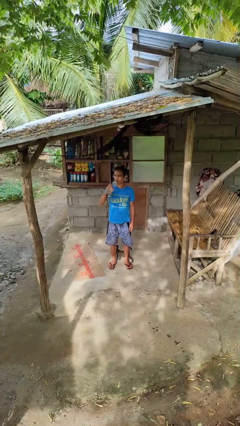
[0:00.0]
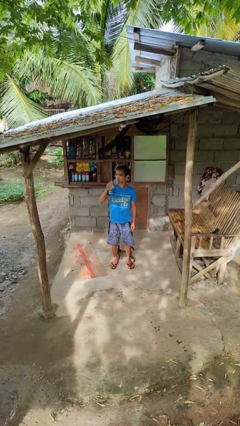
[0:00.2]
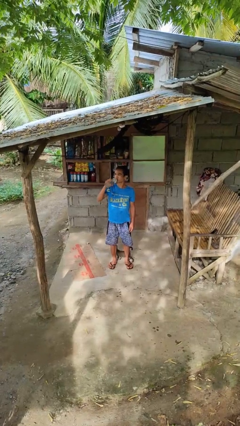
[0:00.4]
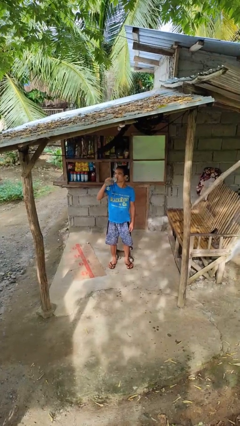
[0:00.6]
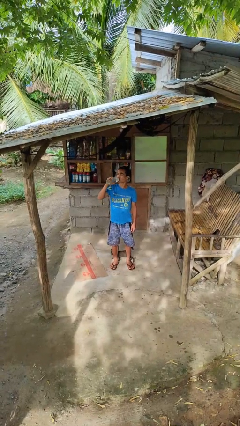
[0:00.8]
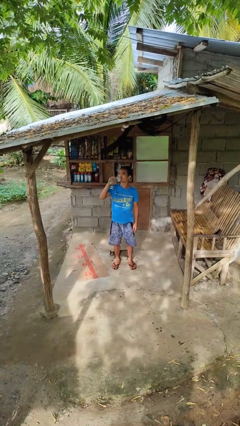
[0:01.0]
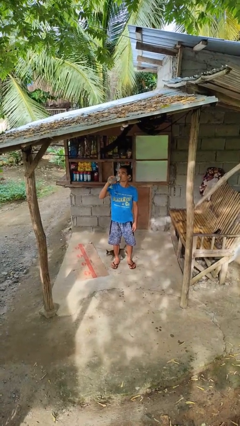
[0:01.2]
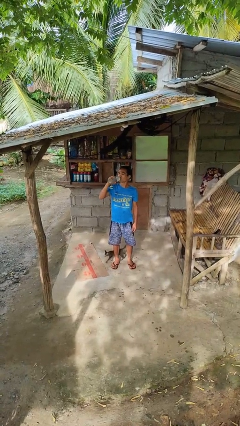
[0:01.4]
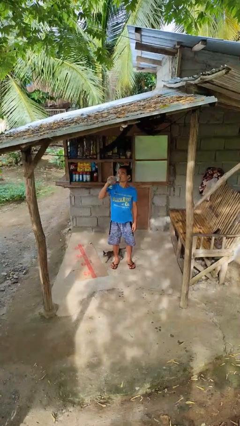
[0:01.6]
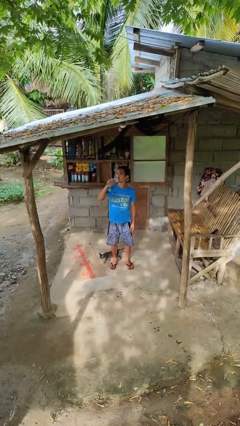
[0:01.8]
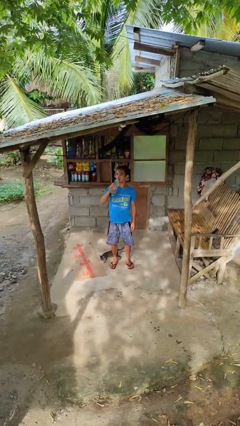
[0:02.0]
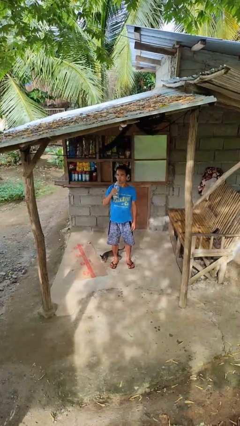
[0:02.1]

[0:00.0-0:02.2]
person drinks from bottle

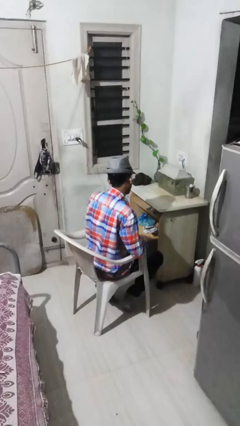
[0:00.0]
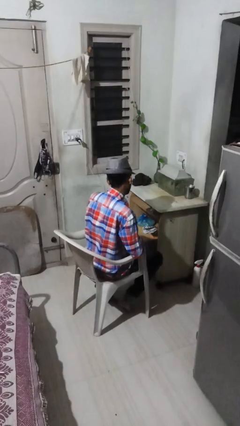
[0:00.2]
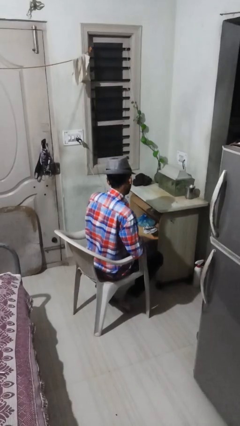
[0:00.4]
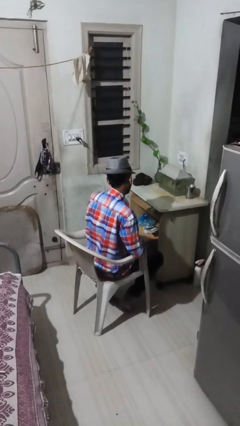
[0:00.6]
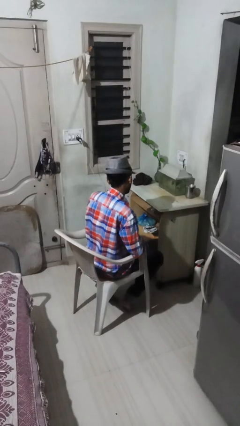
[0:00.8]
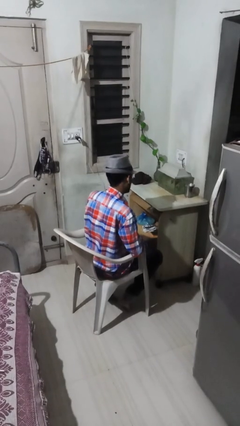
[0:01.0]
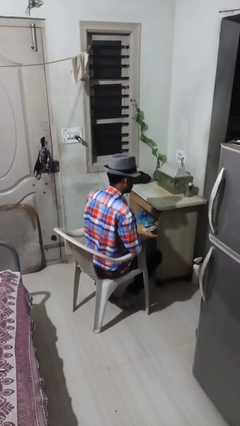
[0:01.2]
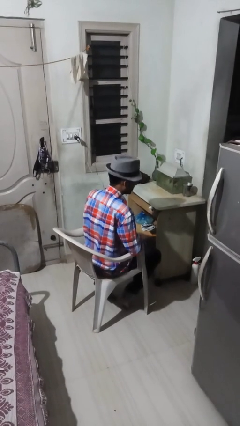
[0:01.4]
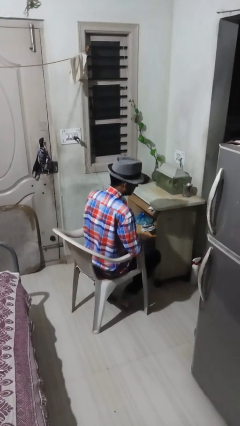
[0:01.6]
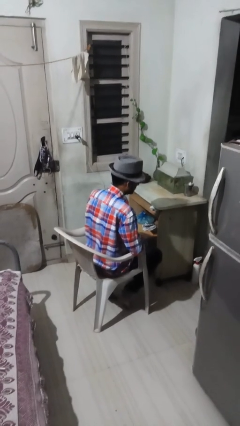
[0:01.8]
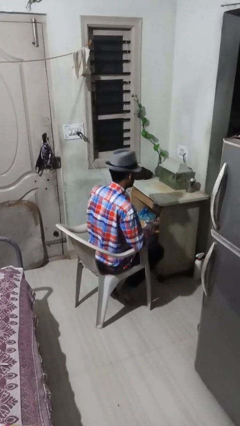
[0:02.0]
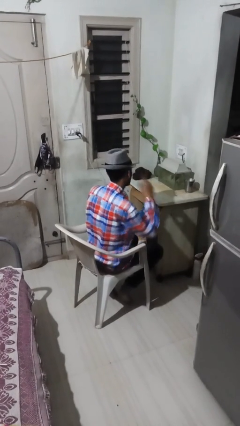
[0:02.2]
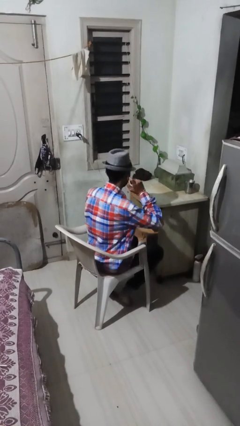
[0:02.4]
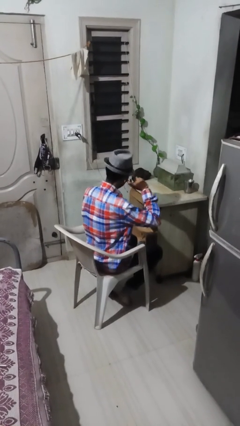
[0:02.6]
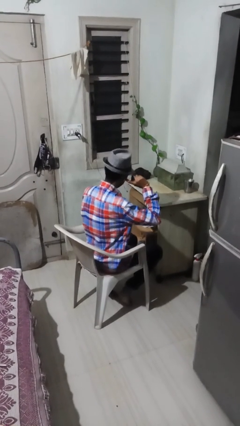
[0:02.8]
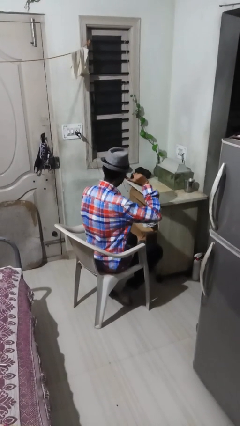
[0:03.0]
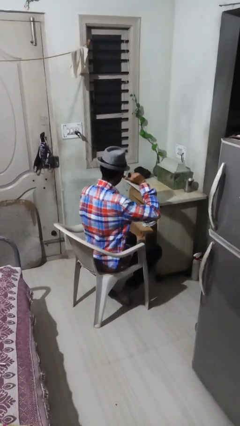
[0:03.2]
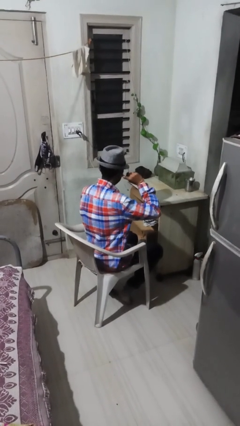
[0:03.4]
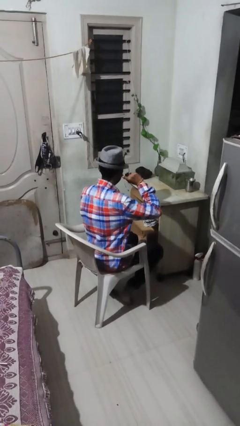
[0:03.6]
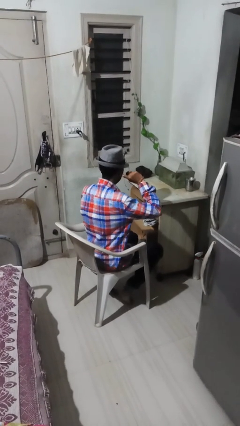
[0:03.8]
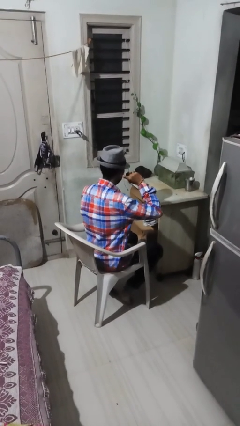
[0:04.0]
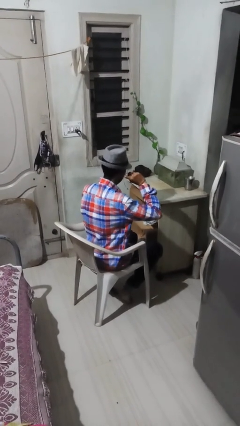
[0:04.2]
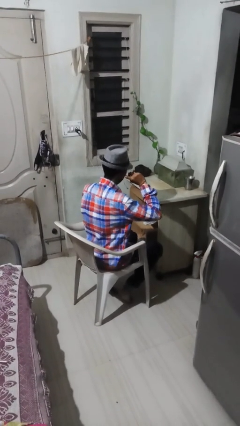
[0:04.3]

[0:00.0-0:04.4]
person puts fingers in ear

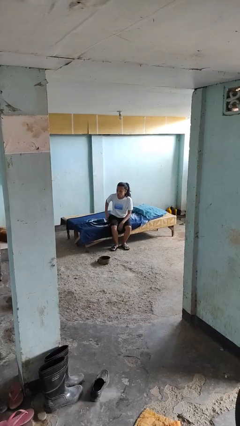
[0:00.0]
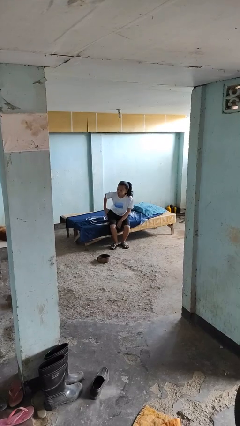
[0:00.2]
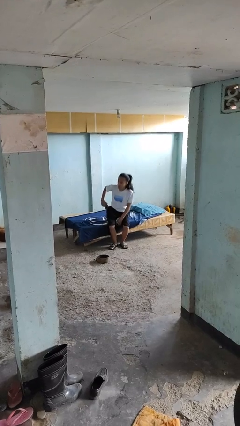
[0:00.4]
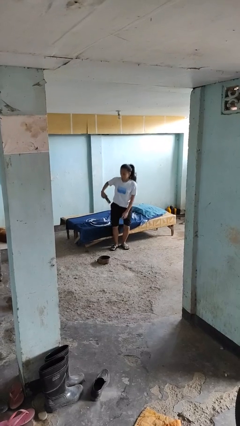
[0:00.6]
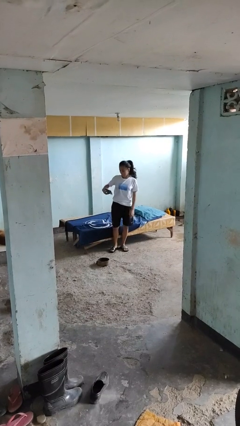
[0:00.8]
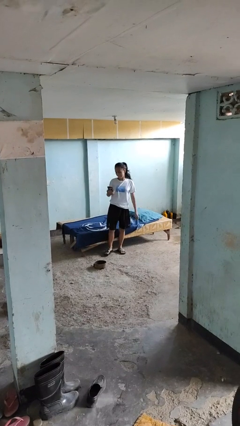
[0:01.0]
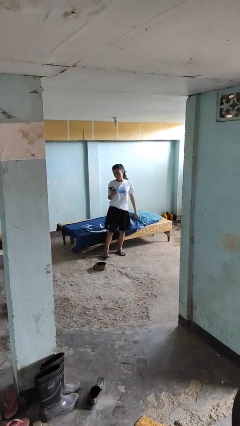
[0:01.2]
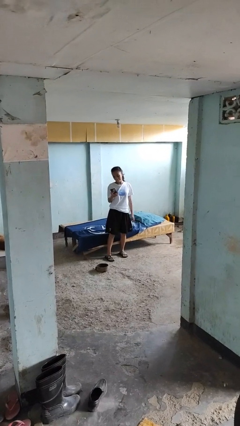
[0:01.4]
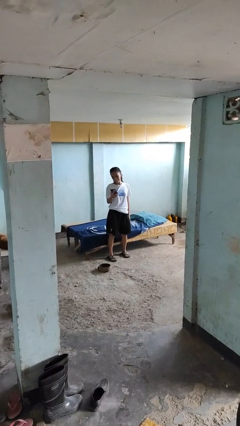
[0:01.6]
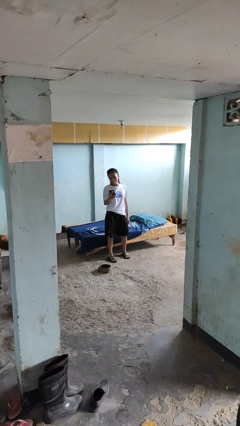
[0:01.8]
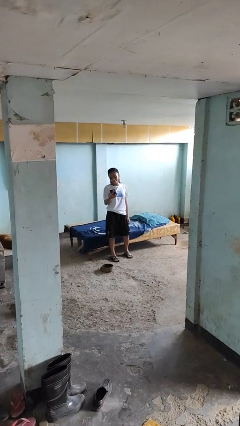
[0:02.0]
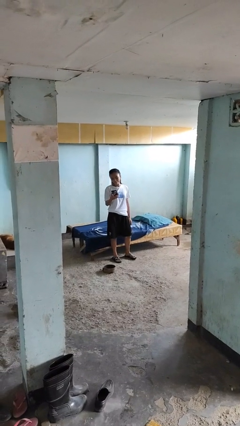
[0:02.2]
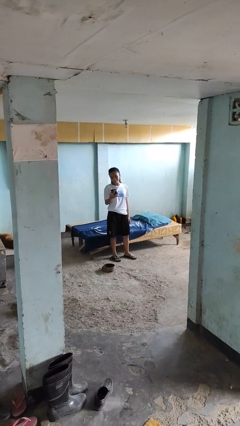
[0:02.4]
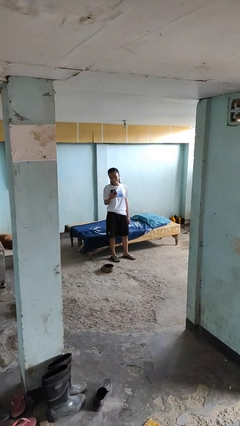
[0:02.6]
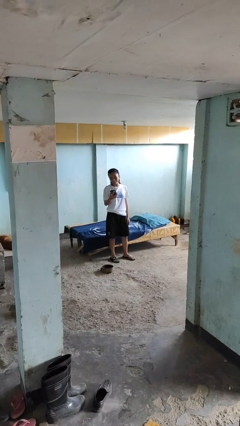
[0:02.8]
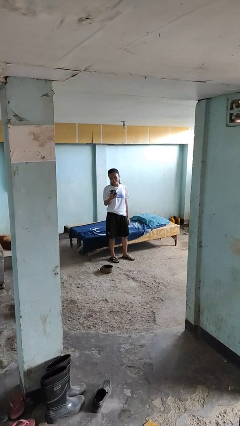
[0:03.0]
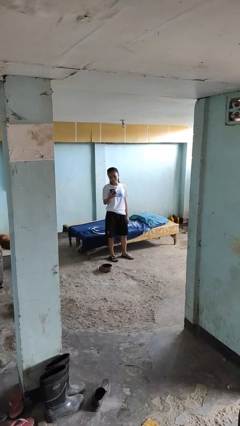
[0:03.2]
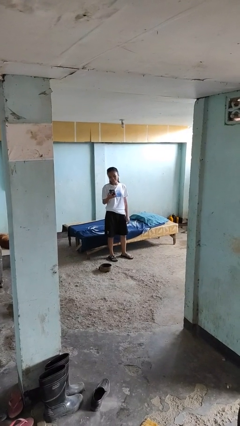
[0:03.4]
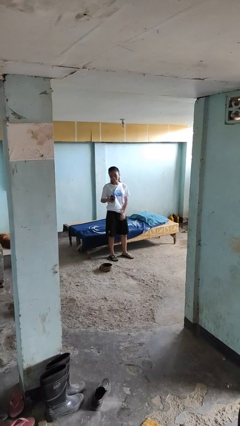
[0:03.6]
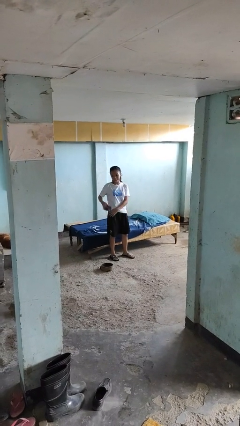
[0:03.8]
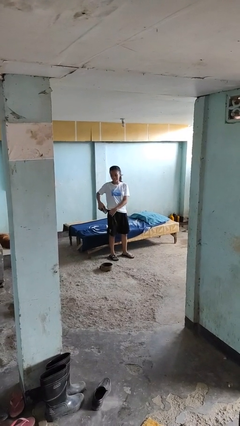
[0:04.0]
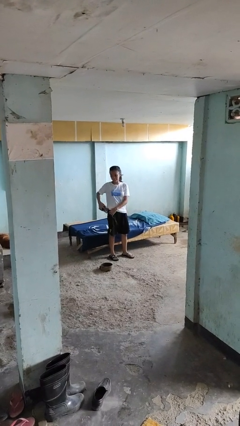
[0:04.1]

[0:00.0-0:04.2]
person takes phone from pocket

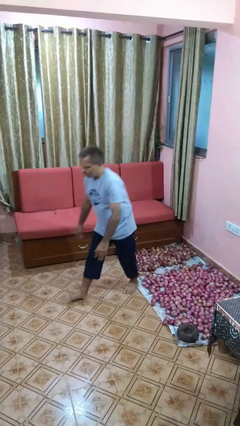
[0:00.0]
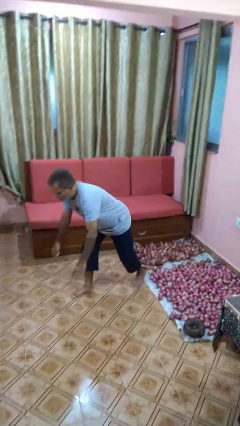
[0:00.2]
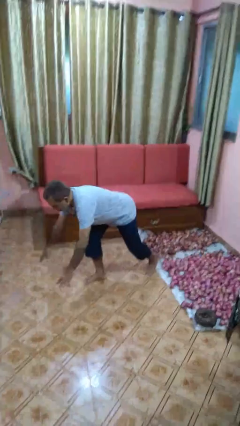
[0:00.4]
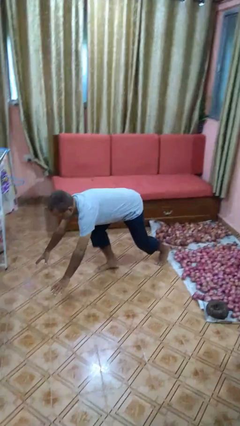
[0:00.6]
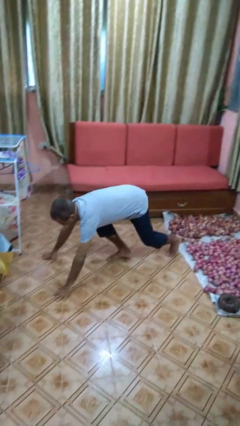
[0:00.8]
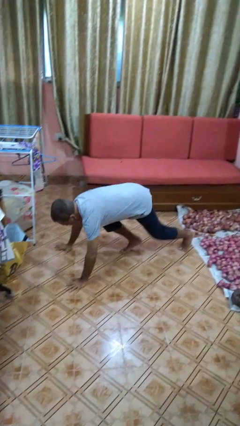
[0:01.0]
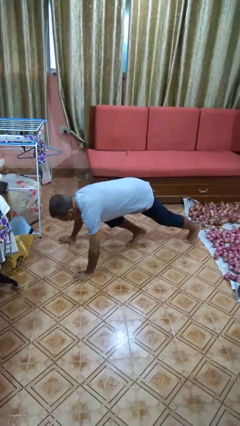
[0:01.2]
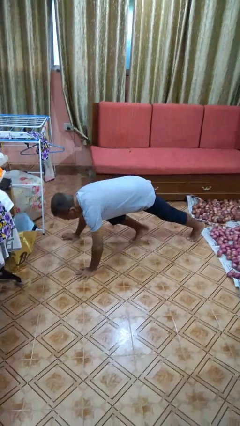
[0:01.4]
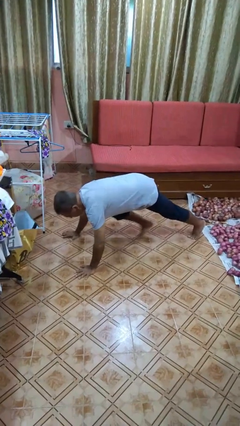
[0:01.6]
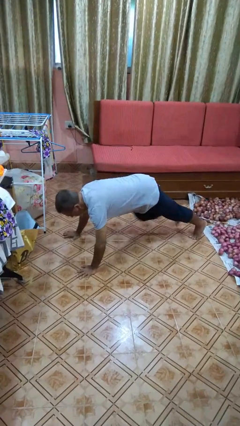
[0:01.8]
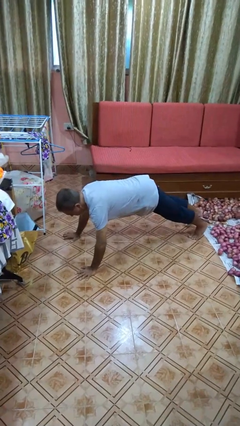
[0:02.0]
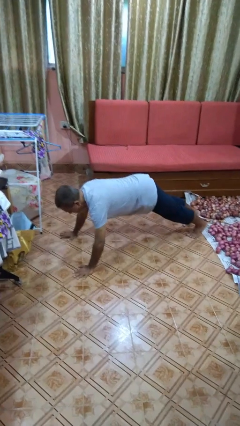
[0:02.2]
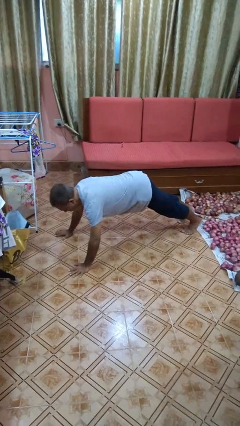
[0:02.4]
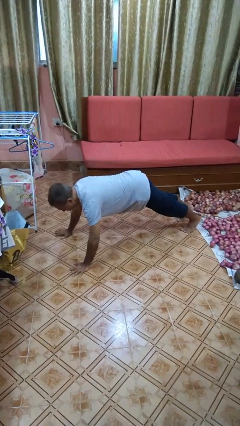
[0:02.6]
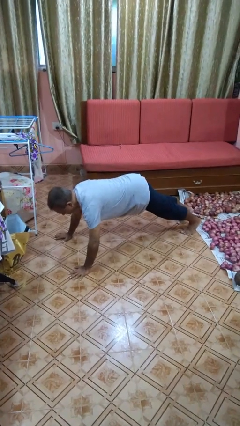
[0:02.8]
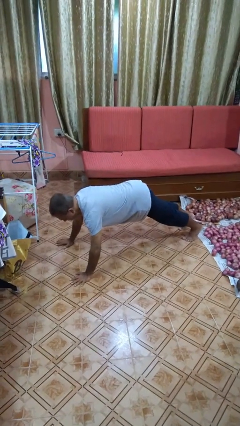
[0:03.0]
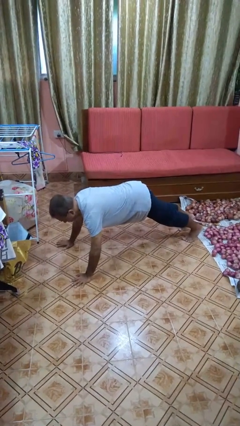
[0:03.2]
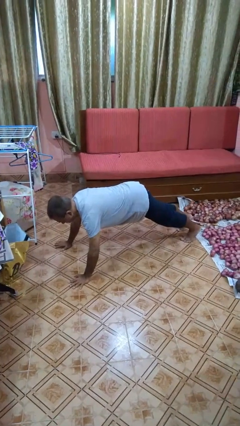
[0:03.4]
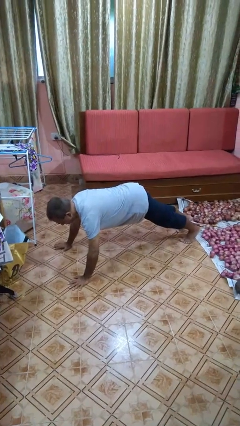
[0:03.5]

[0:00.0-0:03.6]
person exercises with plank

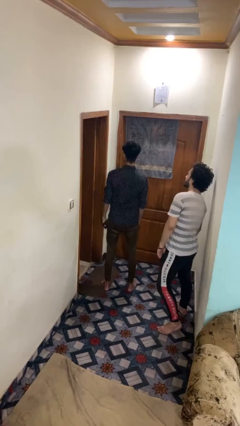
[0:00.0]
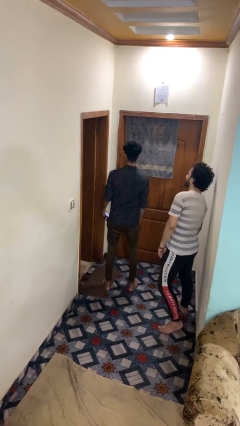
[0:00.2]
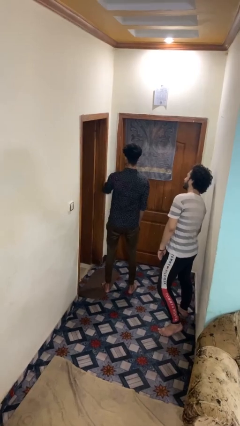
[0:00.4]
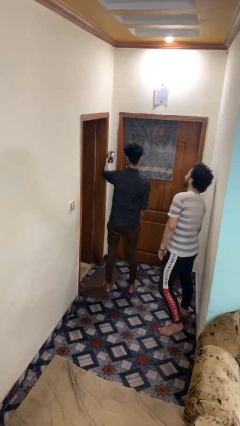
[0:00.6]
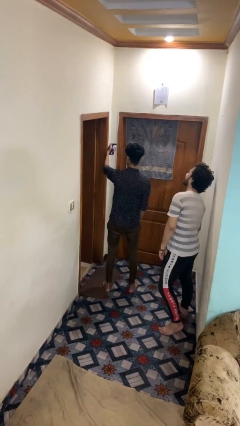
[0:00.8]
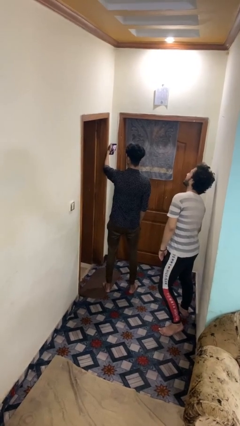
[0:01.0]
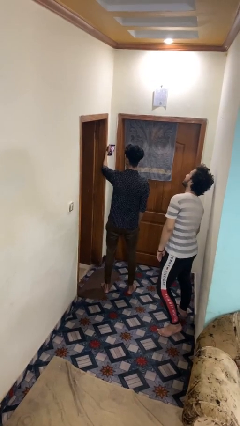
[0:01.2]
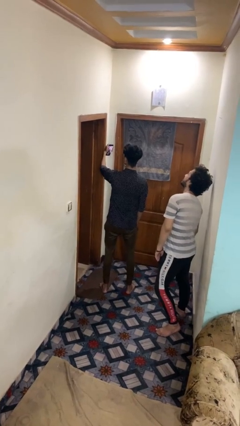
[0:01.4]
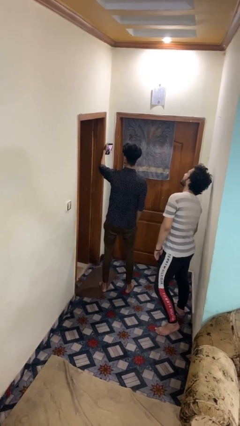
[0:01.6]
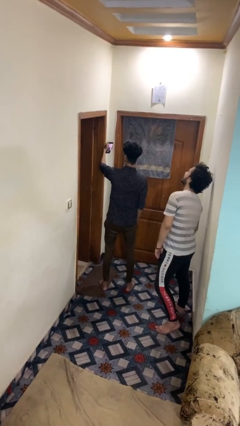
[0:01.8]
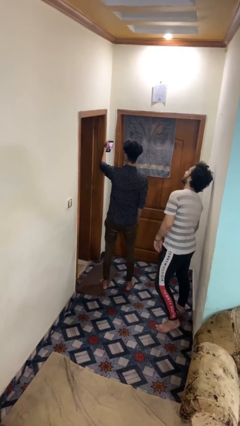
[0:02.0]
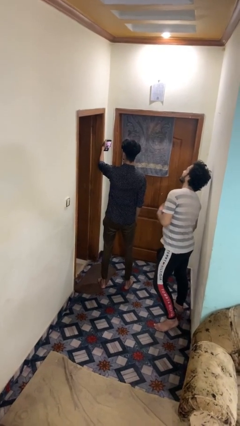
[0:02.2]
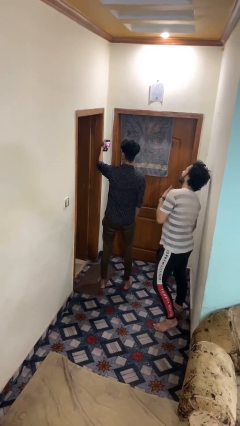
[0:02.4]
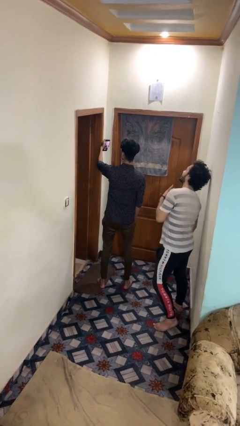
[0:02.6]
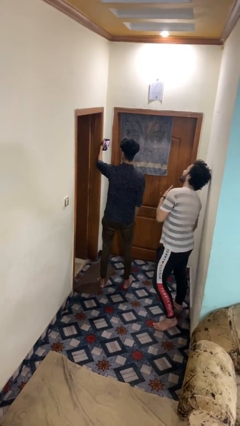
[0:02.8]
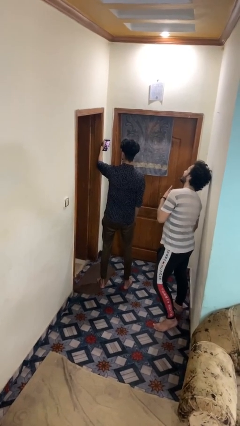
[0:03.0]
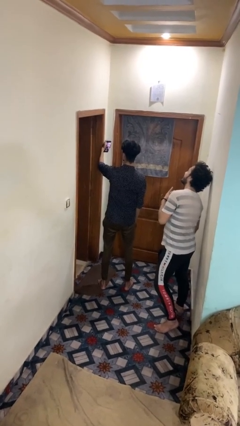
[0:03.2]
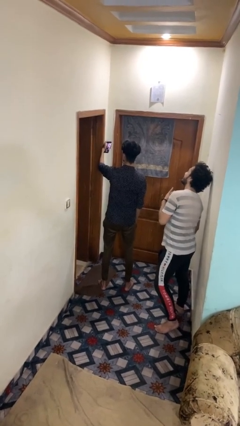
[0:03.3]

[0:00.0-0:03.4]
person takes selfie with person
